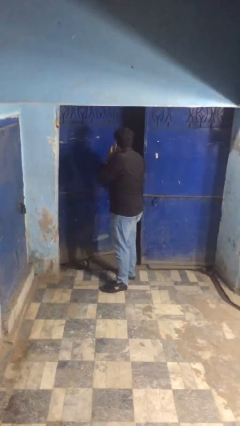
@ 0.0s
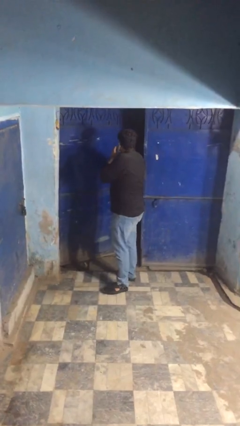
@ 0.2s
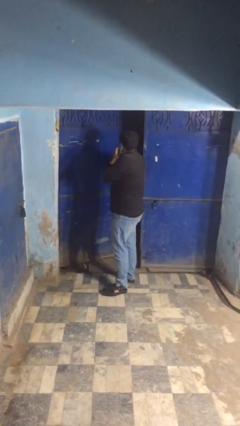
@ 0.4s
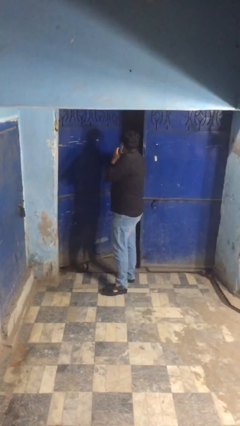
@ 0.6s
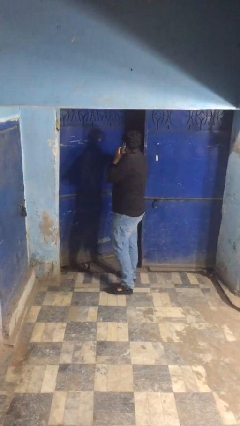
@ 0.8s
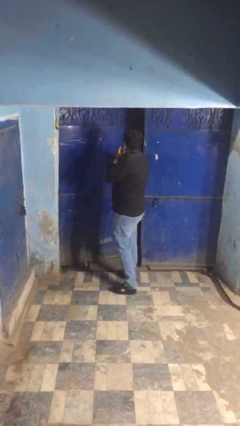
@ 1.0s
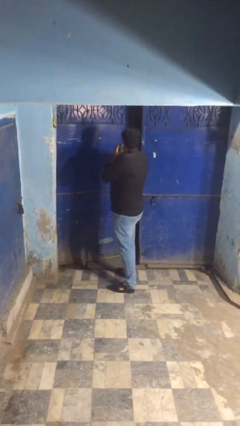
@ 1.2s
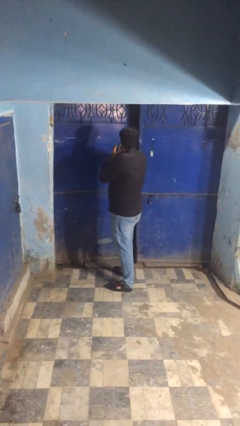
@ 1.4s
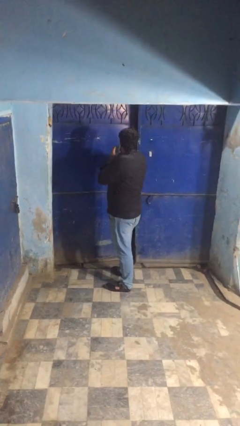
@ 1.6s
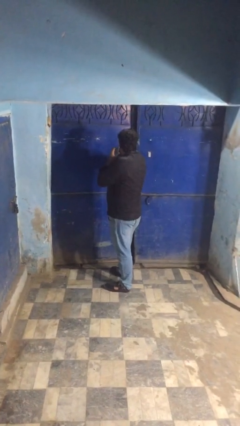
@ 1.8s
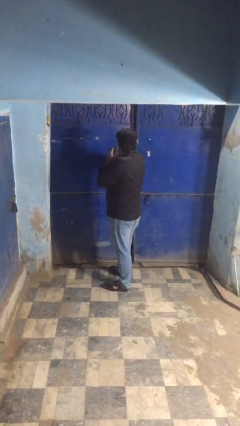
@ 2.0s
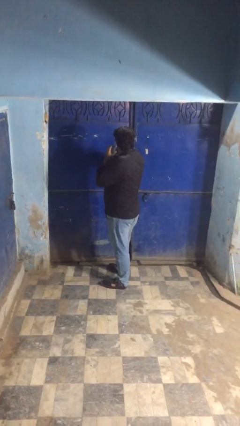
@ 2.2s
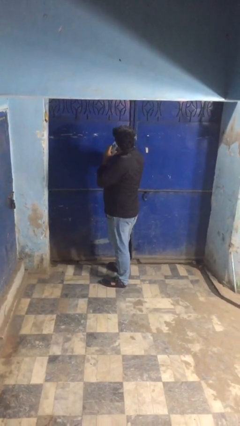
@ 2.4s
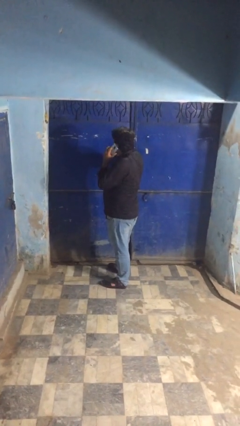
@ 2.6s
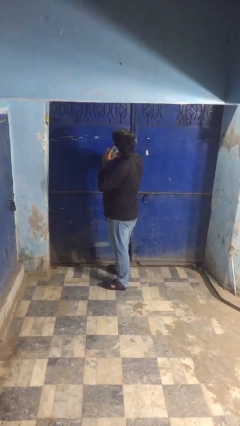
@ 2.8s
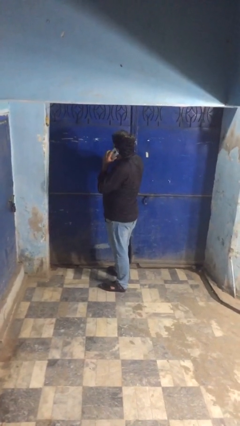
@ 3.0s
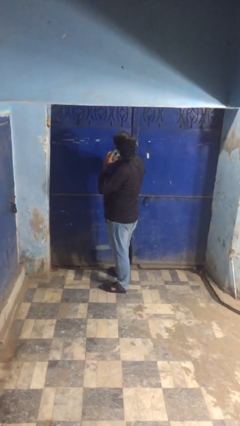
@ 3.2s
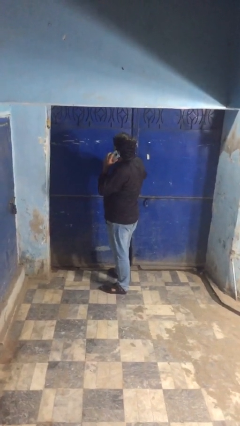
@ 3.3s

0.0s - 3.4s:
person closes facility door

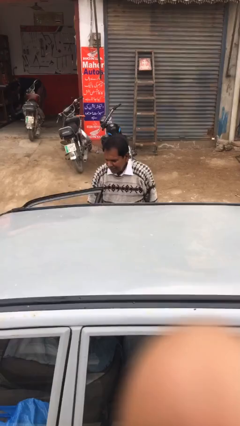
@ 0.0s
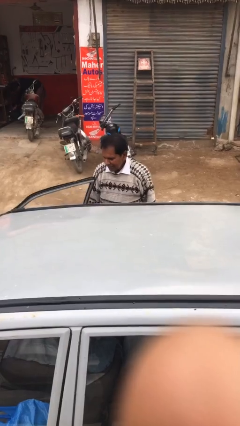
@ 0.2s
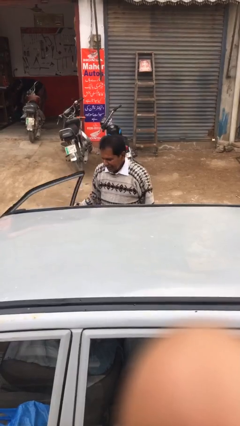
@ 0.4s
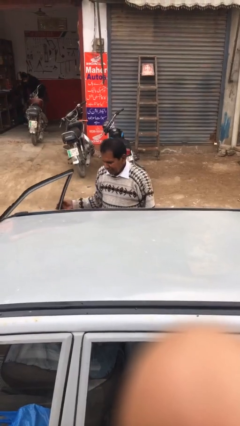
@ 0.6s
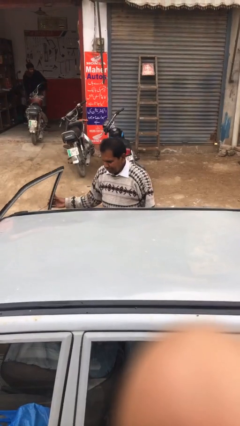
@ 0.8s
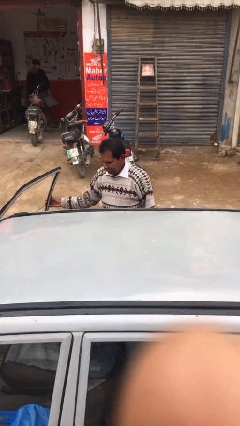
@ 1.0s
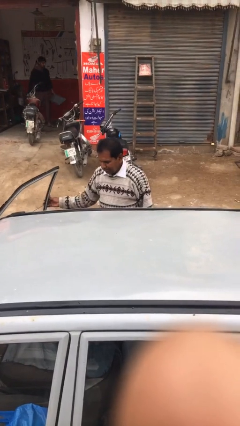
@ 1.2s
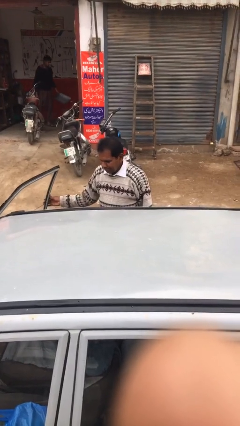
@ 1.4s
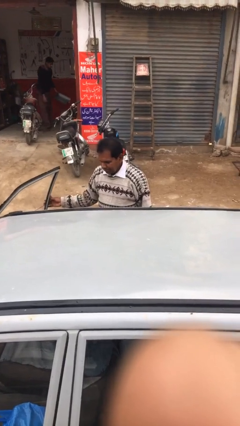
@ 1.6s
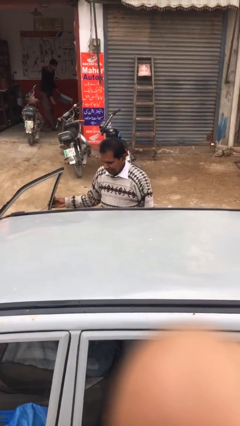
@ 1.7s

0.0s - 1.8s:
person opens car door

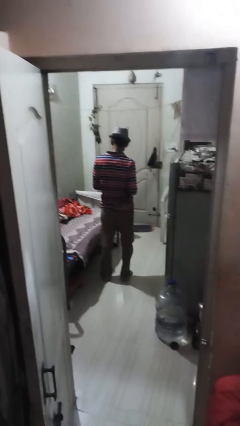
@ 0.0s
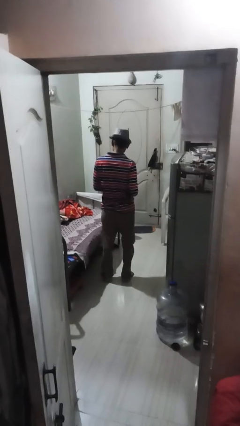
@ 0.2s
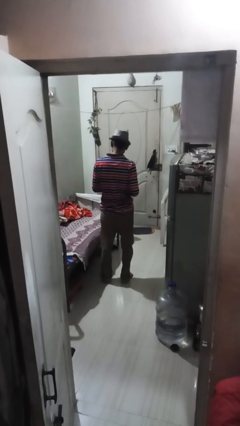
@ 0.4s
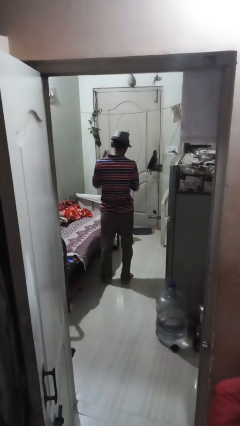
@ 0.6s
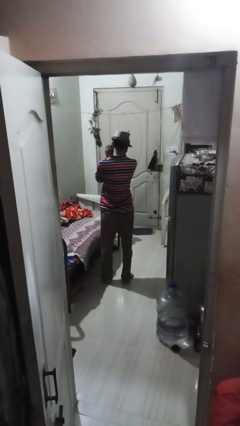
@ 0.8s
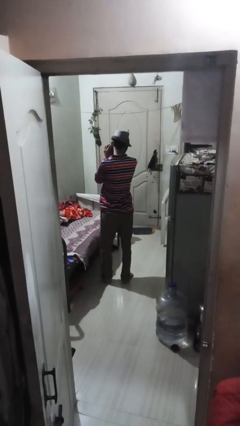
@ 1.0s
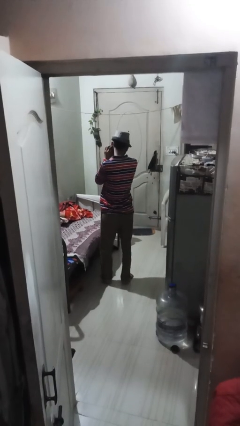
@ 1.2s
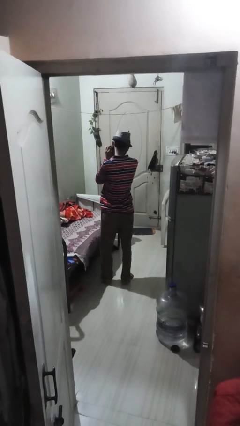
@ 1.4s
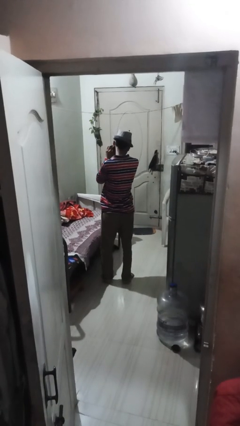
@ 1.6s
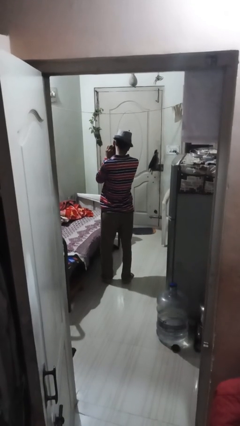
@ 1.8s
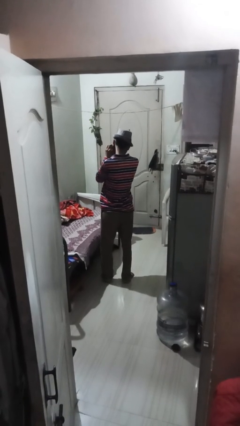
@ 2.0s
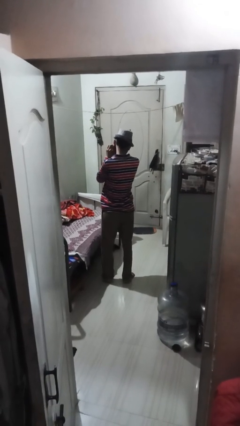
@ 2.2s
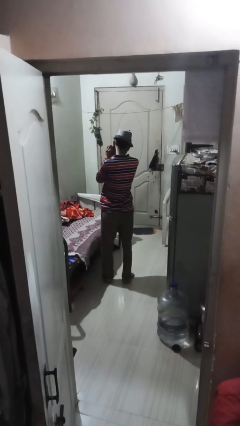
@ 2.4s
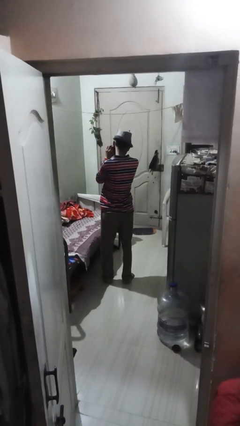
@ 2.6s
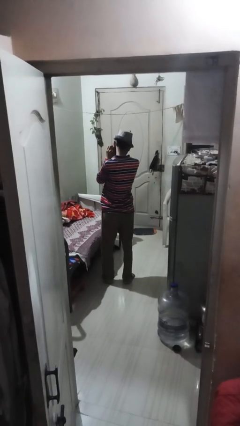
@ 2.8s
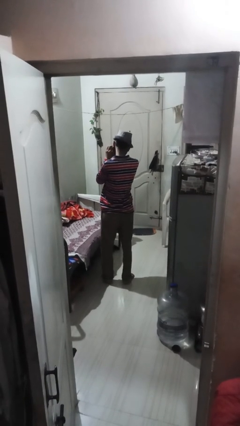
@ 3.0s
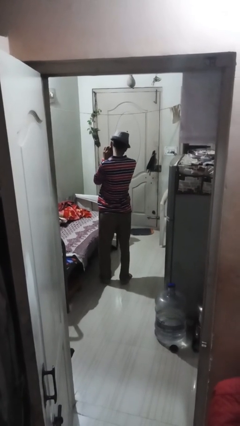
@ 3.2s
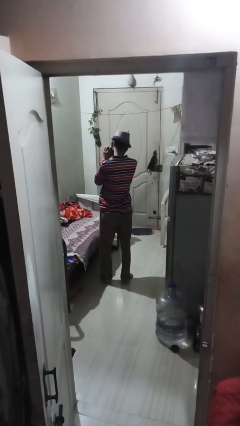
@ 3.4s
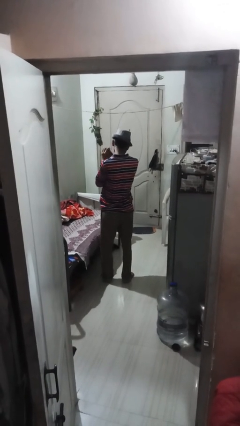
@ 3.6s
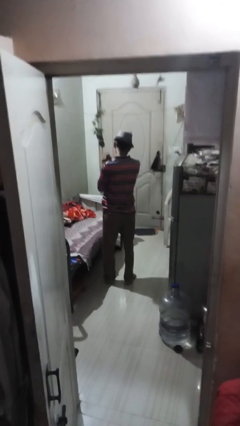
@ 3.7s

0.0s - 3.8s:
person puts on earrings

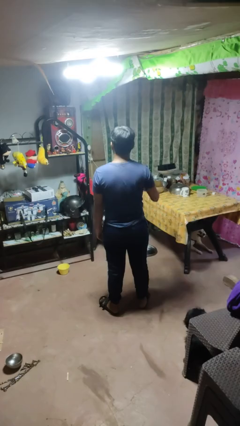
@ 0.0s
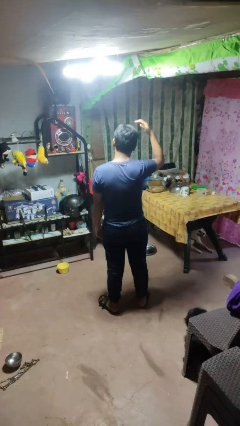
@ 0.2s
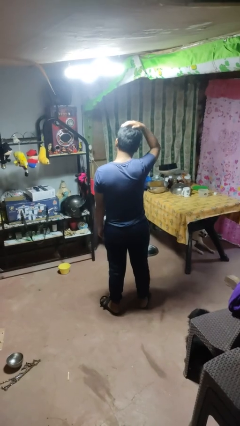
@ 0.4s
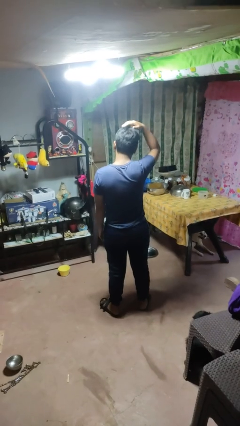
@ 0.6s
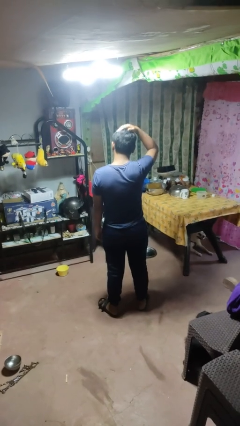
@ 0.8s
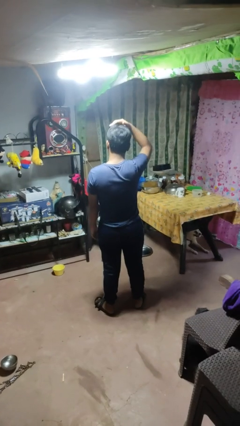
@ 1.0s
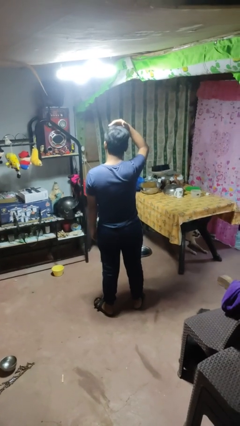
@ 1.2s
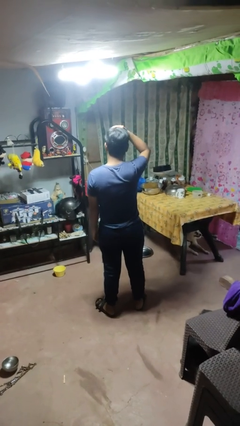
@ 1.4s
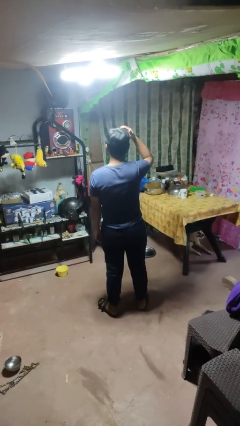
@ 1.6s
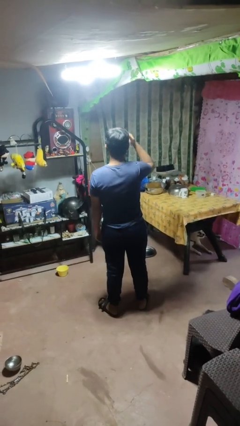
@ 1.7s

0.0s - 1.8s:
person pats head

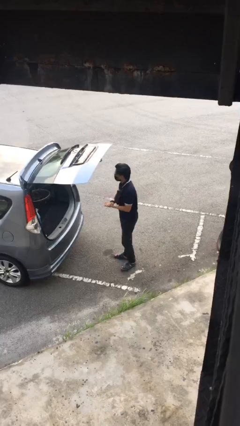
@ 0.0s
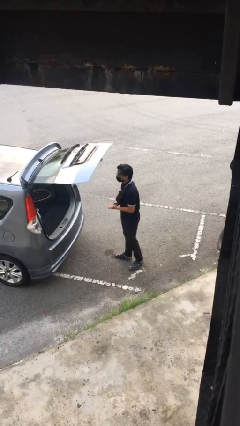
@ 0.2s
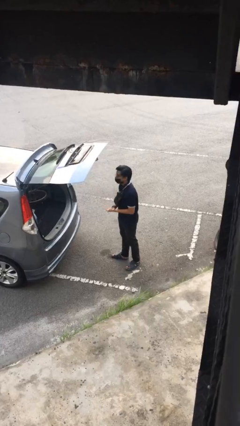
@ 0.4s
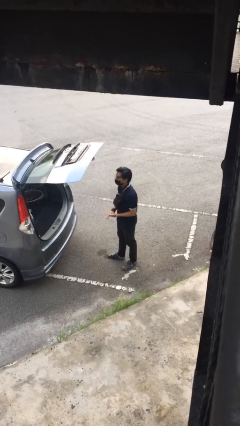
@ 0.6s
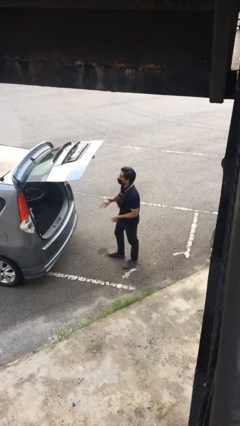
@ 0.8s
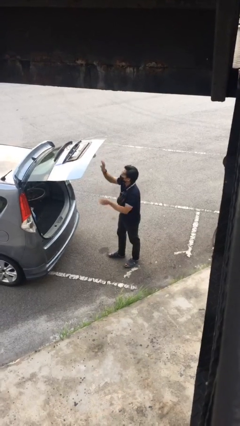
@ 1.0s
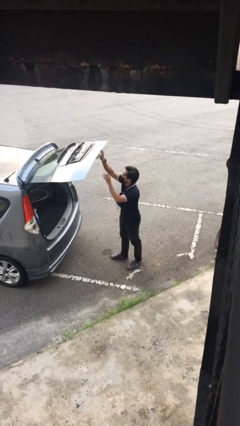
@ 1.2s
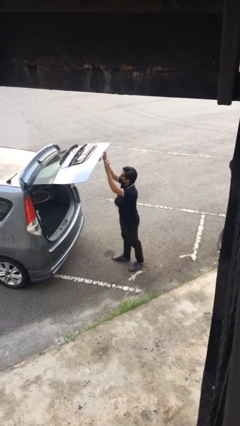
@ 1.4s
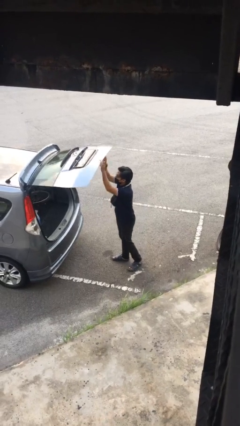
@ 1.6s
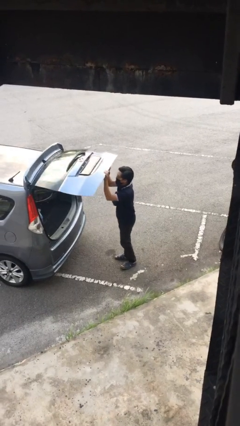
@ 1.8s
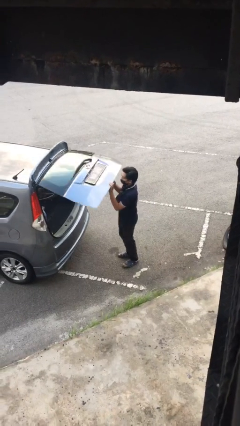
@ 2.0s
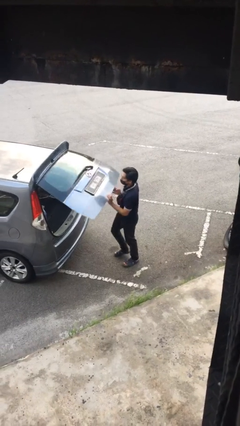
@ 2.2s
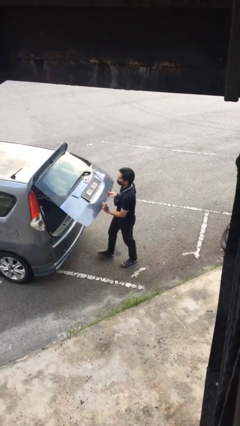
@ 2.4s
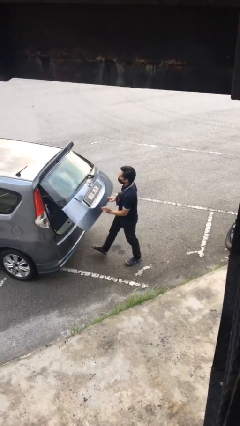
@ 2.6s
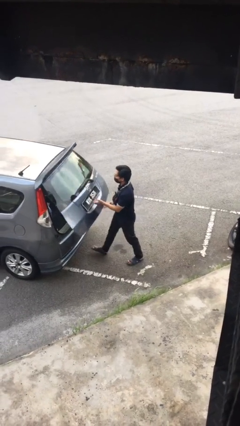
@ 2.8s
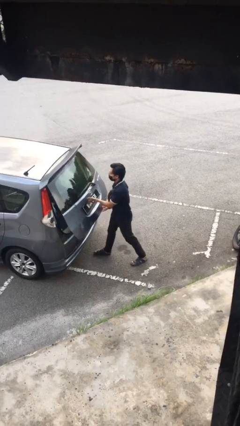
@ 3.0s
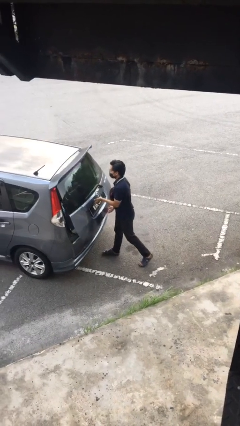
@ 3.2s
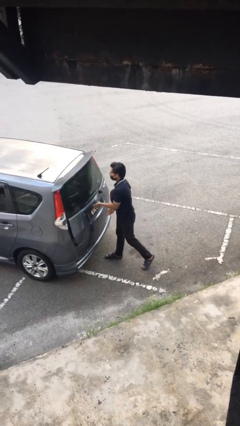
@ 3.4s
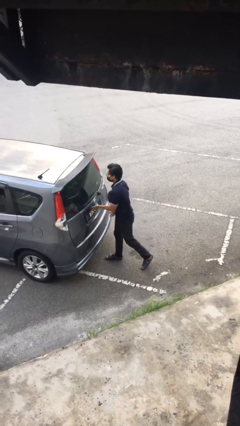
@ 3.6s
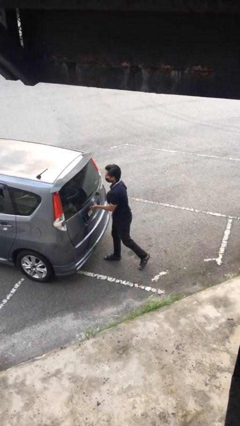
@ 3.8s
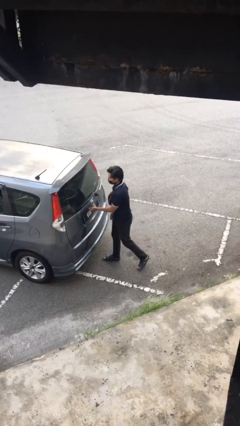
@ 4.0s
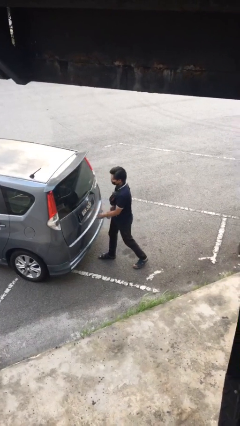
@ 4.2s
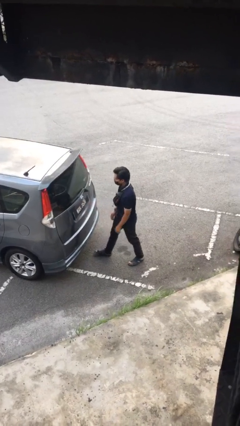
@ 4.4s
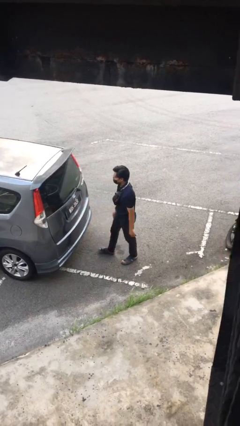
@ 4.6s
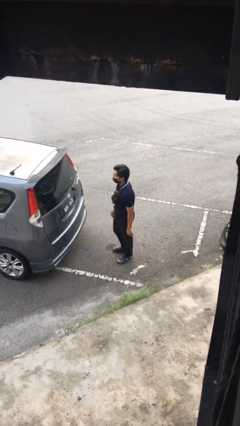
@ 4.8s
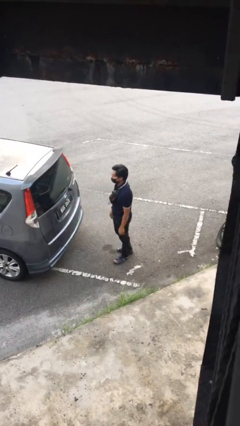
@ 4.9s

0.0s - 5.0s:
person closes car trunk

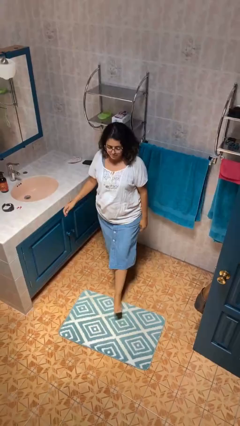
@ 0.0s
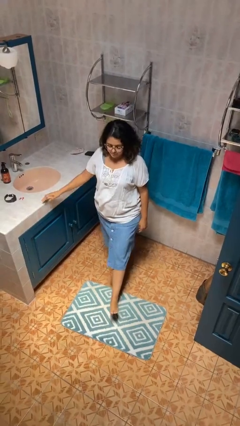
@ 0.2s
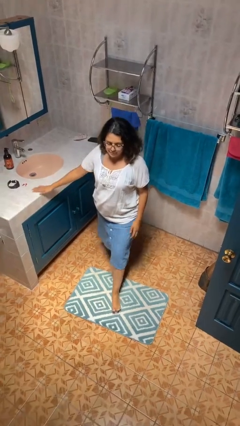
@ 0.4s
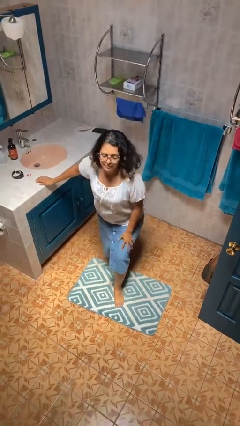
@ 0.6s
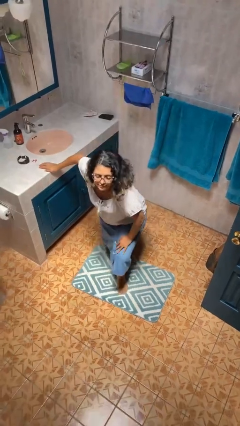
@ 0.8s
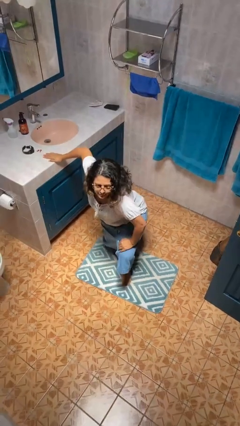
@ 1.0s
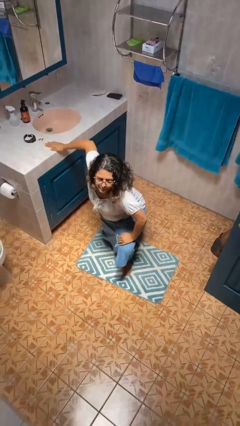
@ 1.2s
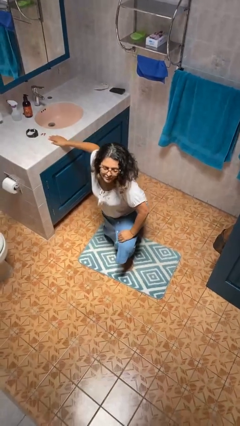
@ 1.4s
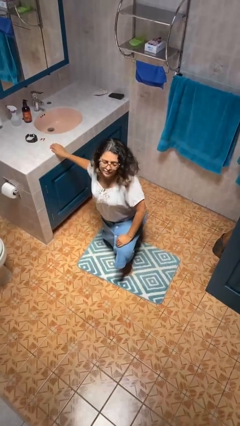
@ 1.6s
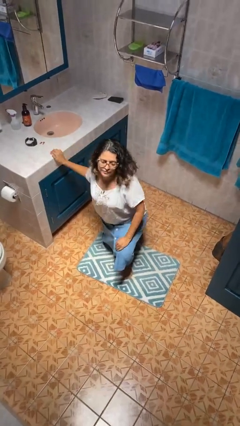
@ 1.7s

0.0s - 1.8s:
person kneels
